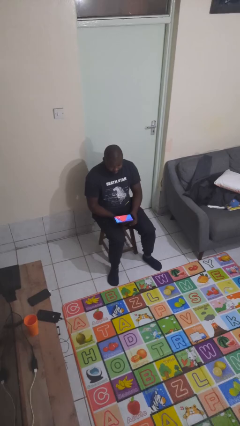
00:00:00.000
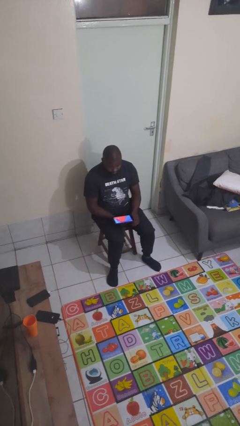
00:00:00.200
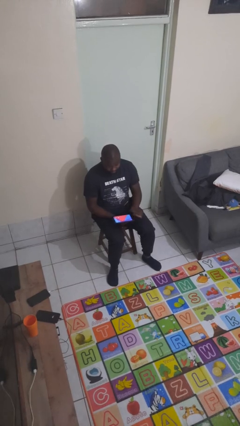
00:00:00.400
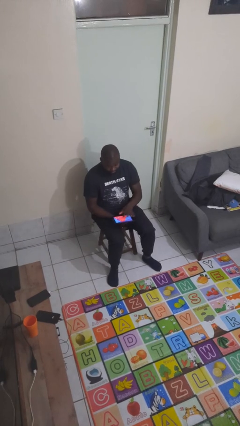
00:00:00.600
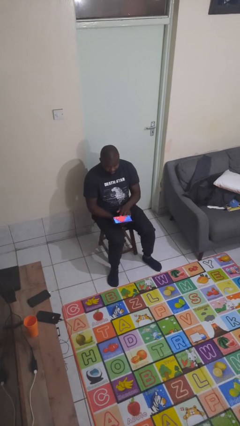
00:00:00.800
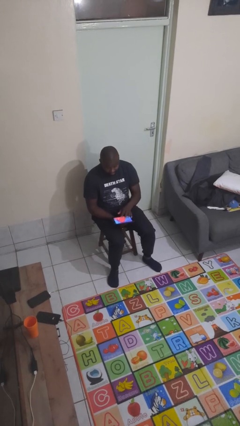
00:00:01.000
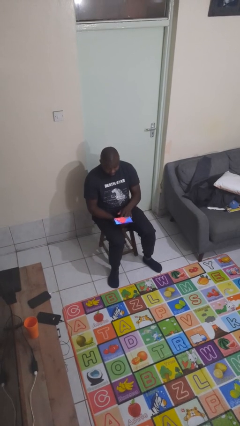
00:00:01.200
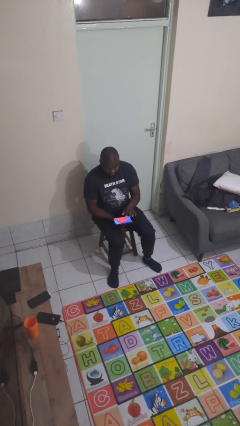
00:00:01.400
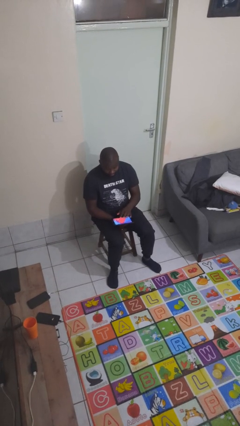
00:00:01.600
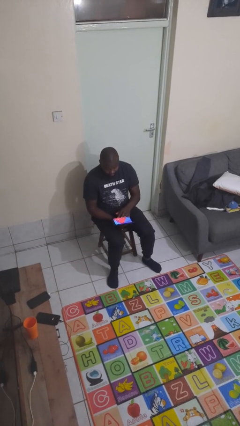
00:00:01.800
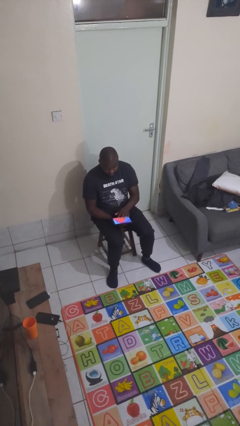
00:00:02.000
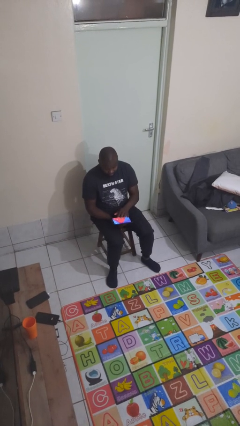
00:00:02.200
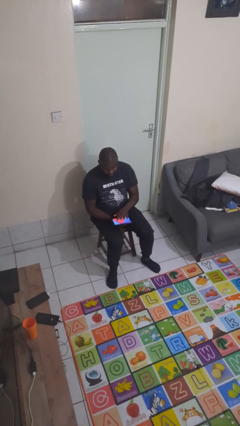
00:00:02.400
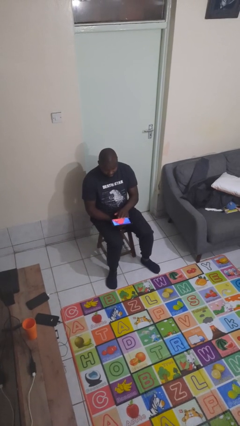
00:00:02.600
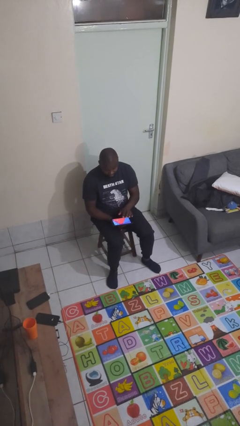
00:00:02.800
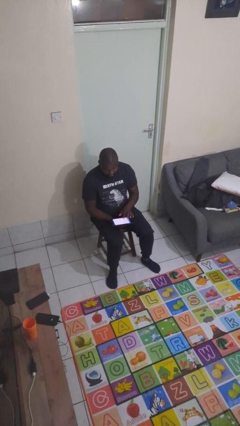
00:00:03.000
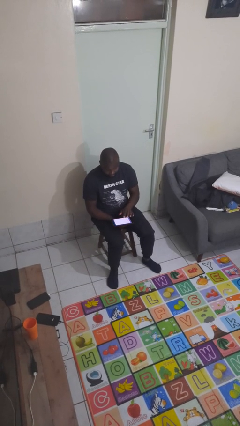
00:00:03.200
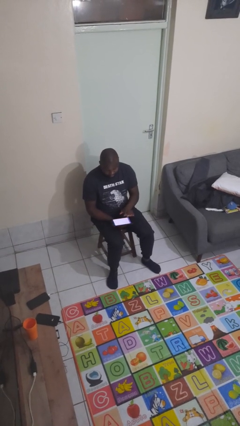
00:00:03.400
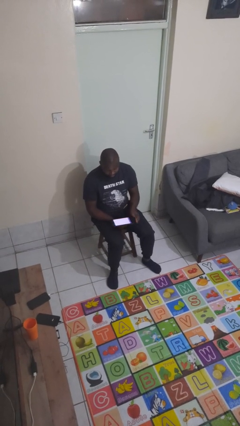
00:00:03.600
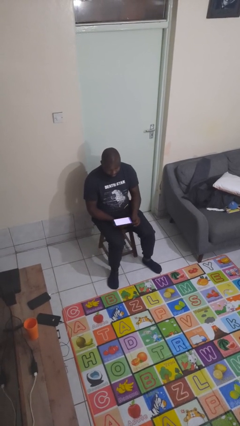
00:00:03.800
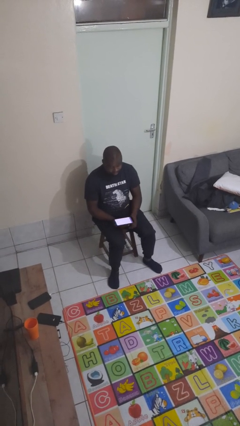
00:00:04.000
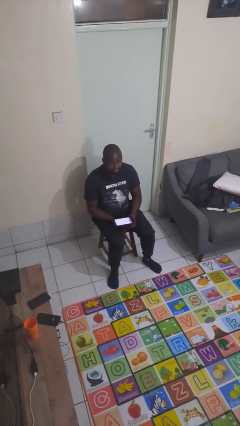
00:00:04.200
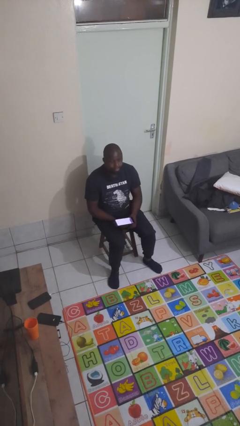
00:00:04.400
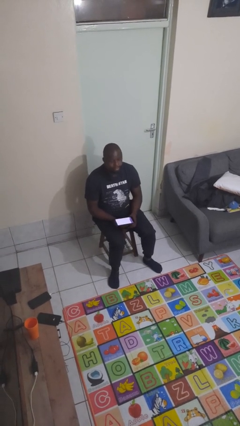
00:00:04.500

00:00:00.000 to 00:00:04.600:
person interacts with tablet

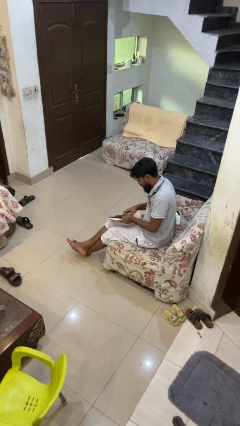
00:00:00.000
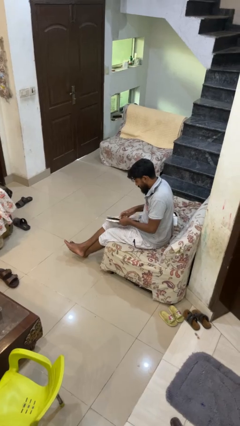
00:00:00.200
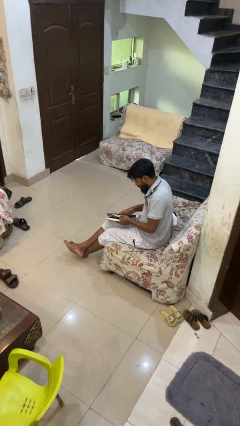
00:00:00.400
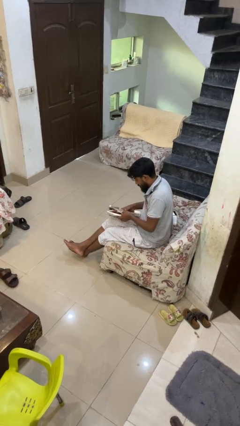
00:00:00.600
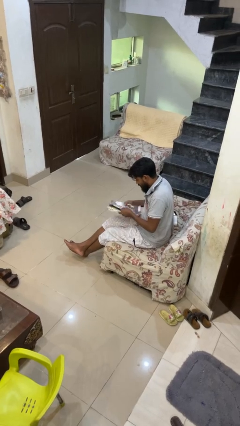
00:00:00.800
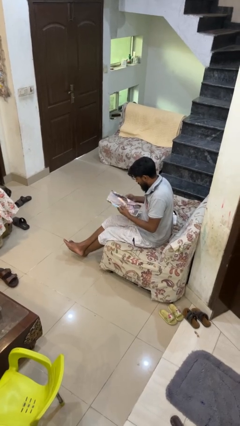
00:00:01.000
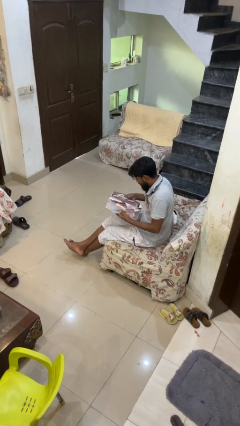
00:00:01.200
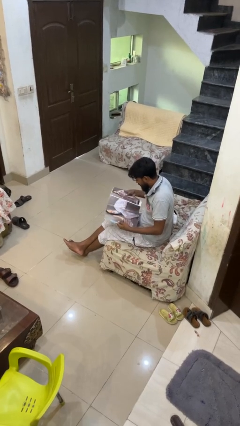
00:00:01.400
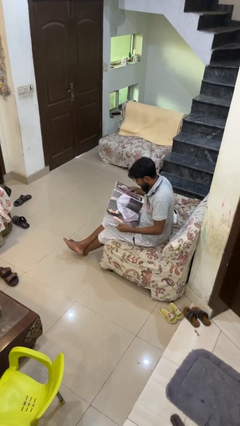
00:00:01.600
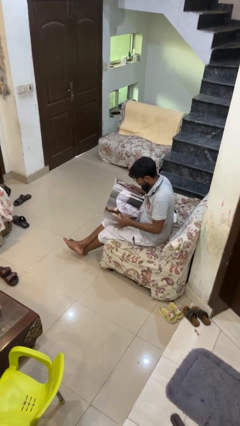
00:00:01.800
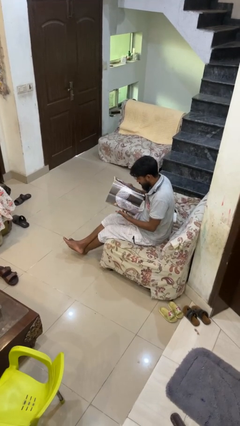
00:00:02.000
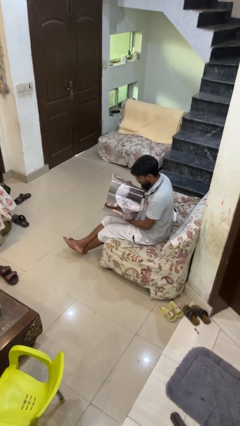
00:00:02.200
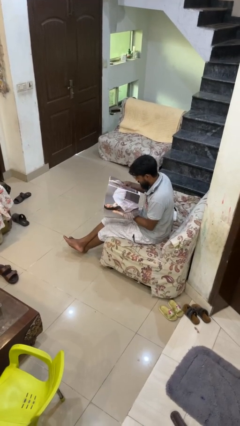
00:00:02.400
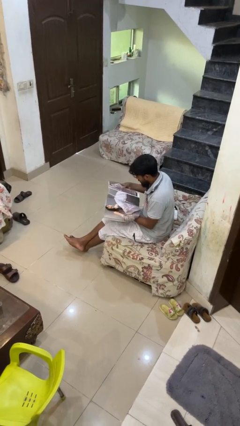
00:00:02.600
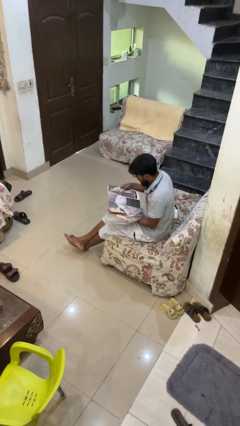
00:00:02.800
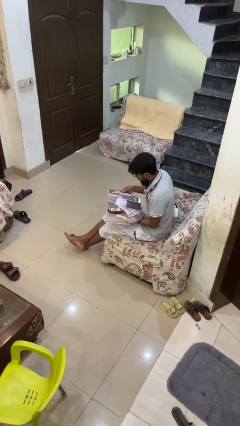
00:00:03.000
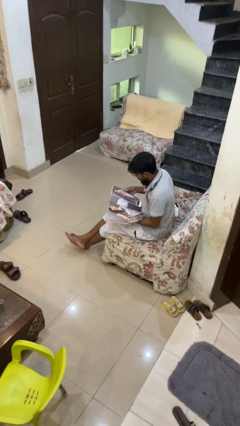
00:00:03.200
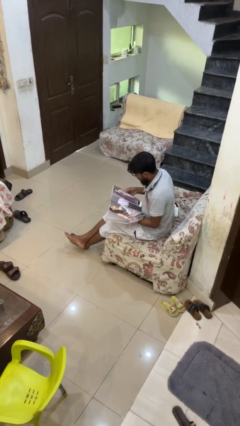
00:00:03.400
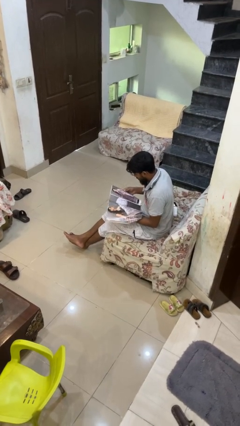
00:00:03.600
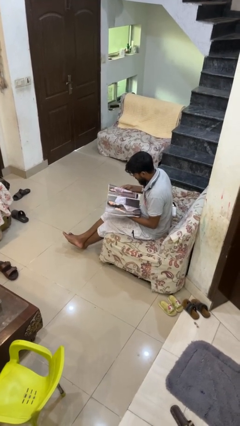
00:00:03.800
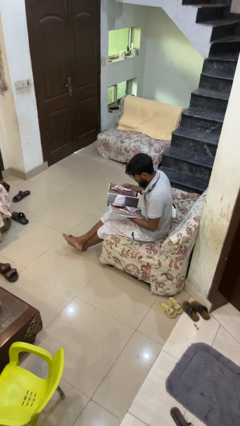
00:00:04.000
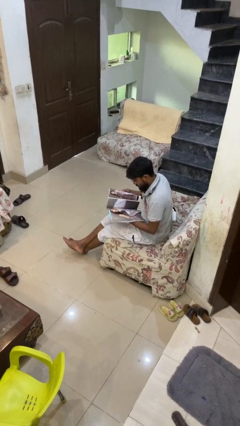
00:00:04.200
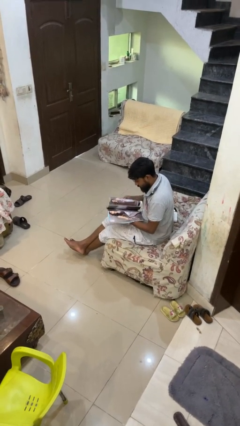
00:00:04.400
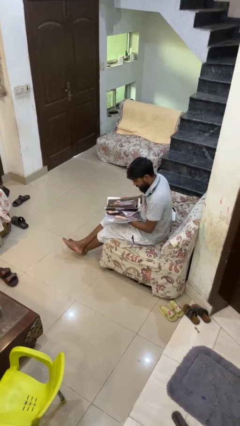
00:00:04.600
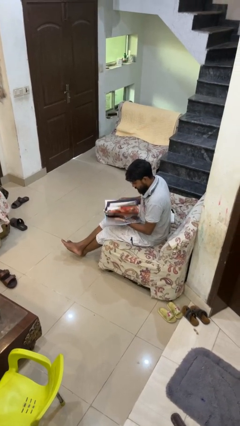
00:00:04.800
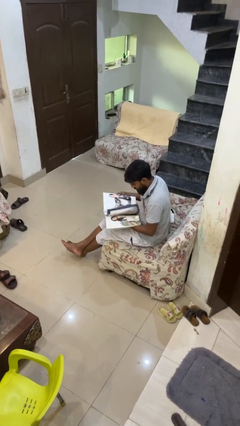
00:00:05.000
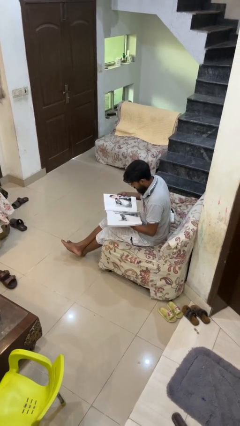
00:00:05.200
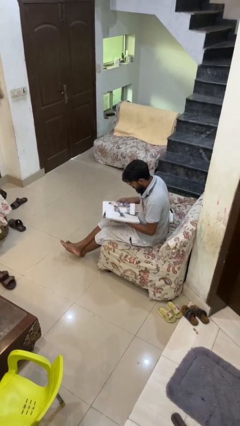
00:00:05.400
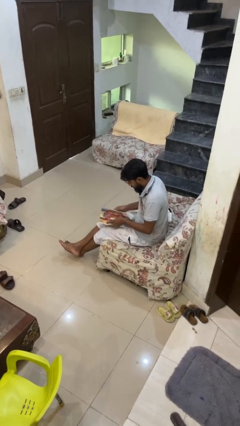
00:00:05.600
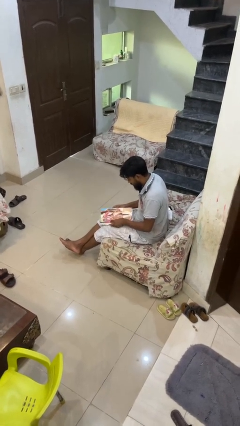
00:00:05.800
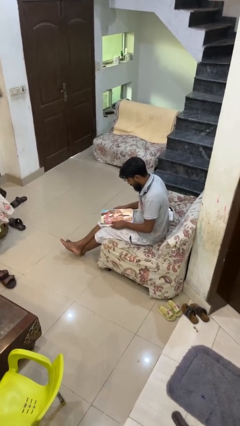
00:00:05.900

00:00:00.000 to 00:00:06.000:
person reads magazine

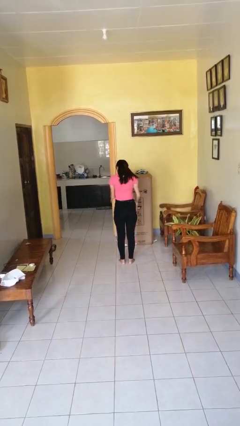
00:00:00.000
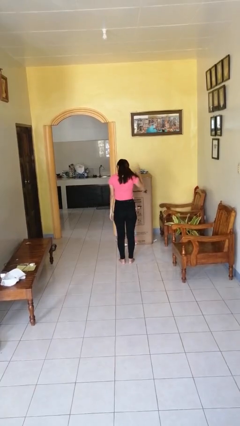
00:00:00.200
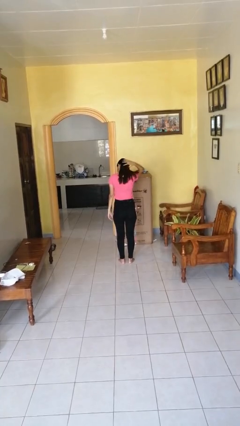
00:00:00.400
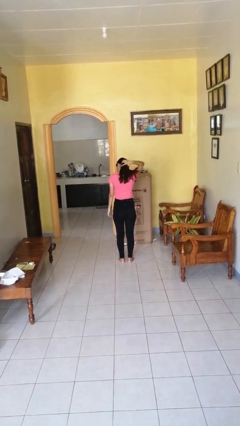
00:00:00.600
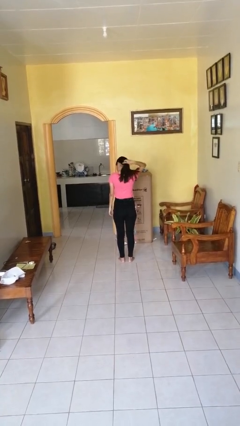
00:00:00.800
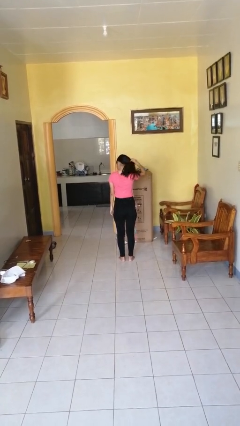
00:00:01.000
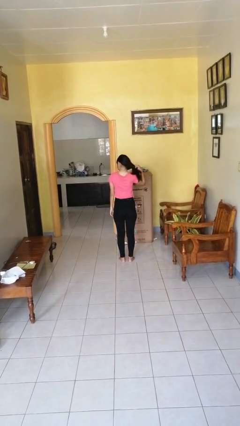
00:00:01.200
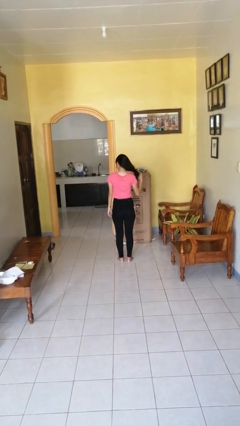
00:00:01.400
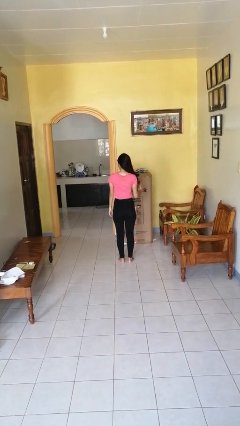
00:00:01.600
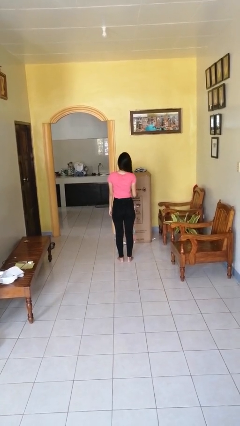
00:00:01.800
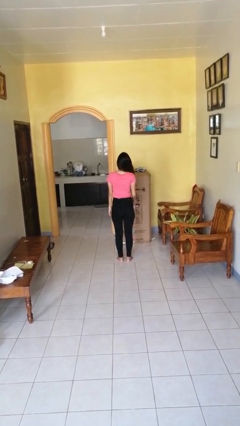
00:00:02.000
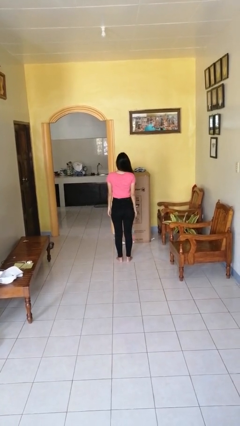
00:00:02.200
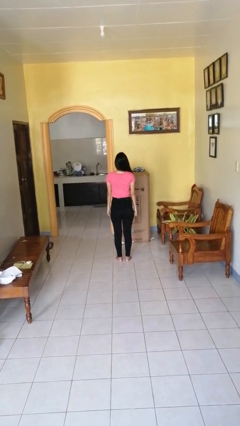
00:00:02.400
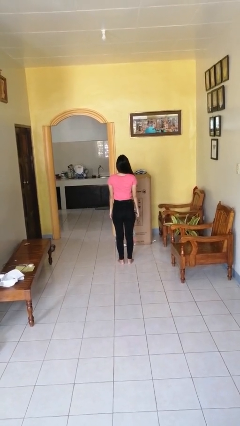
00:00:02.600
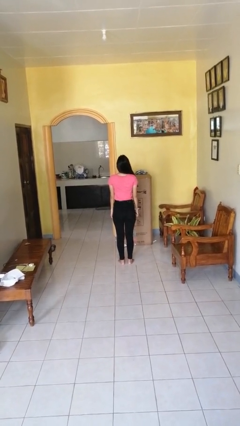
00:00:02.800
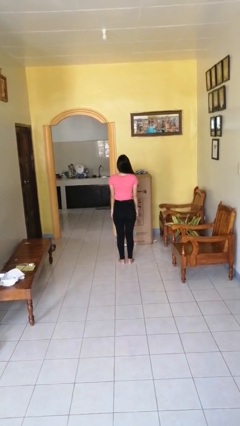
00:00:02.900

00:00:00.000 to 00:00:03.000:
person takes off hairtie

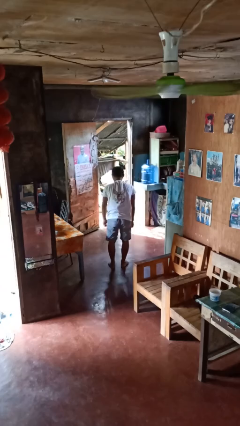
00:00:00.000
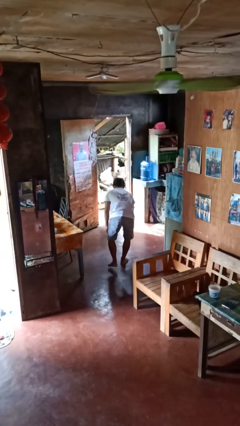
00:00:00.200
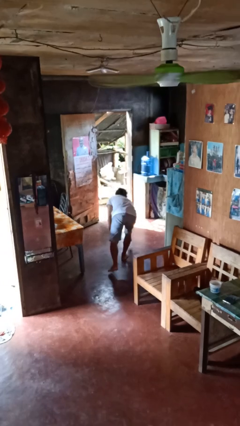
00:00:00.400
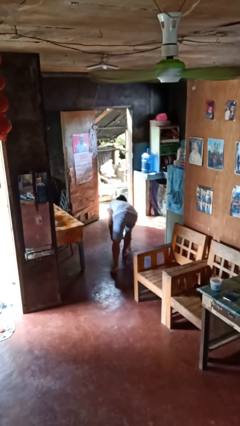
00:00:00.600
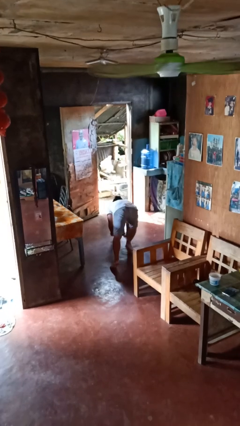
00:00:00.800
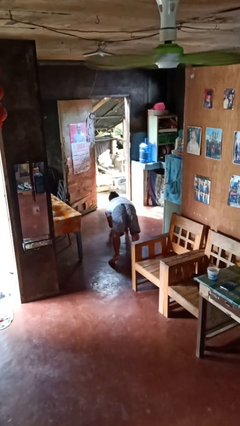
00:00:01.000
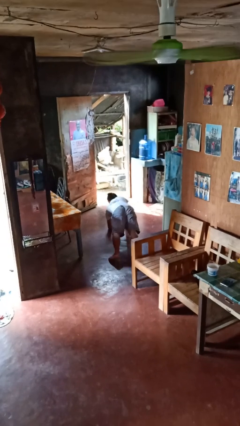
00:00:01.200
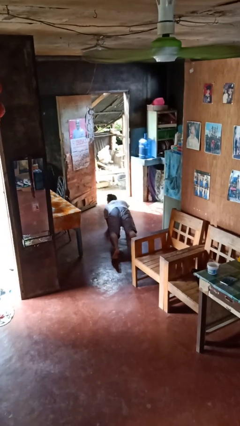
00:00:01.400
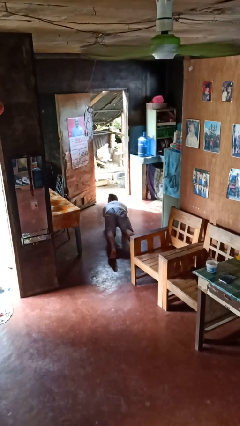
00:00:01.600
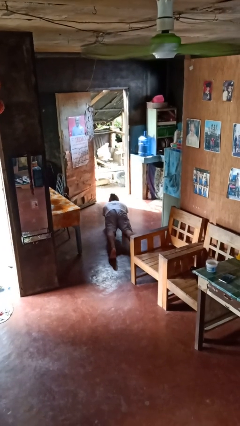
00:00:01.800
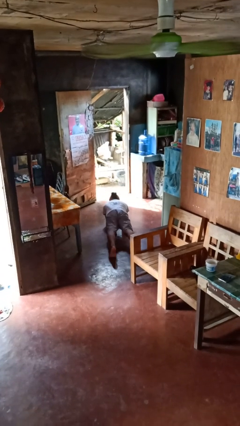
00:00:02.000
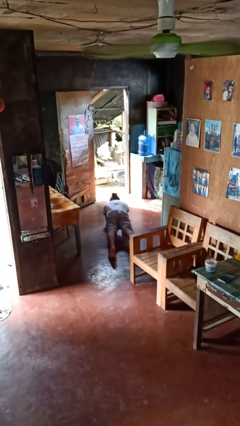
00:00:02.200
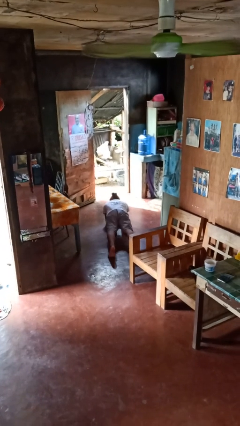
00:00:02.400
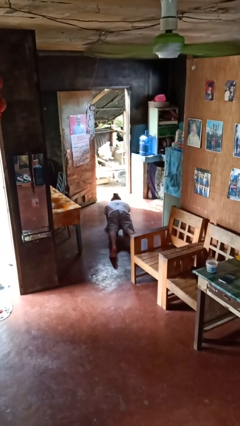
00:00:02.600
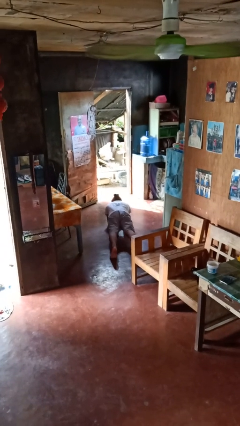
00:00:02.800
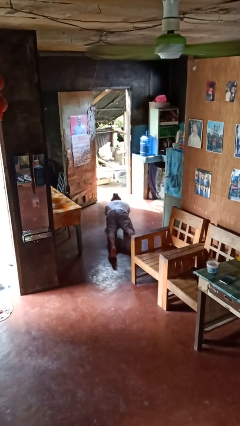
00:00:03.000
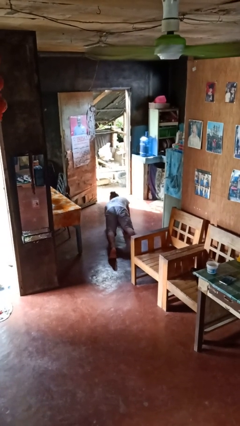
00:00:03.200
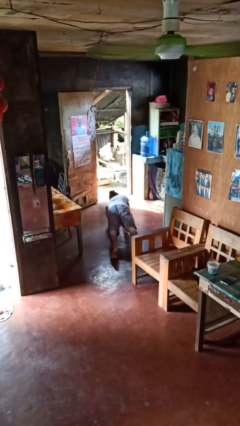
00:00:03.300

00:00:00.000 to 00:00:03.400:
person exercises with plank

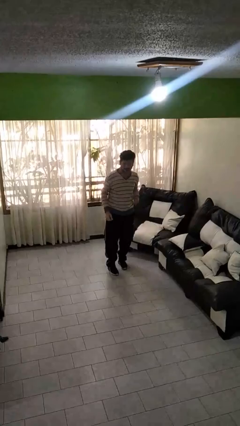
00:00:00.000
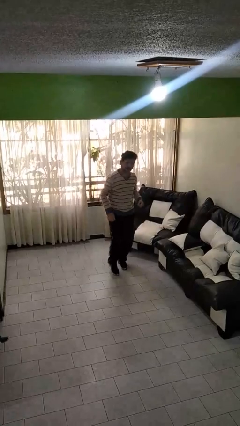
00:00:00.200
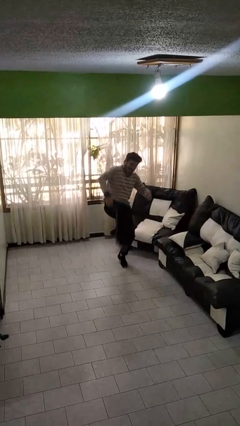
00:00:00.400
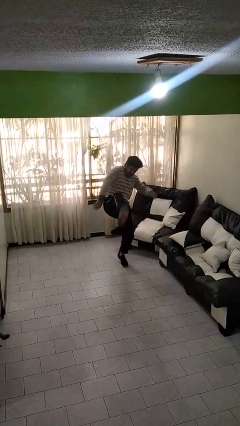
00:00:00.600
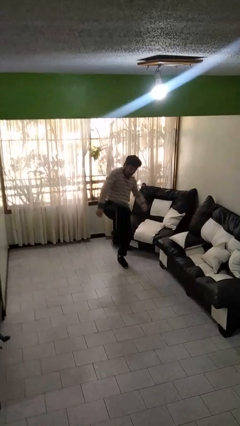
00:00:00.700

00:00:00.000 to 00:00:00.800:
person karate kicks

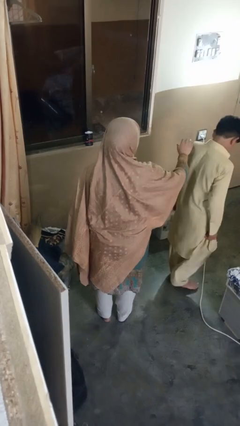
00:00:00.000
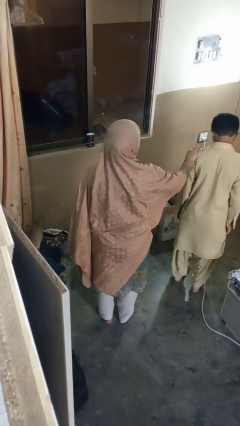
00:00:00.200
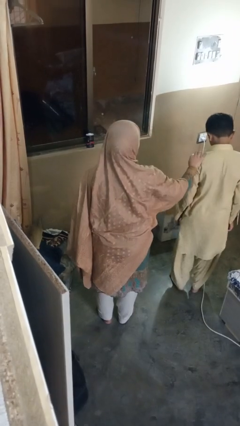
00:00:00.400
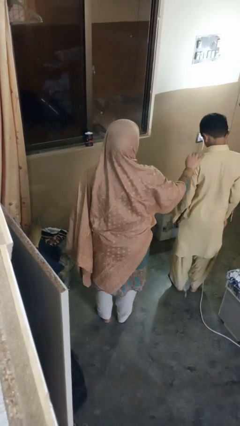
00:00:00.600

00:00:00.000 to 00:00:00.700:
person spins person around
